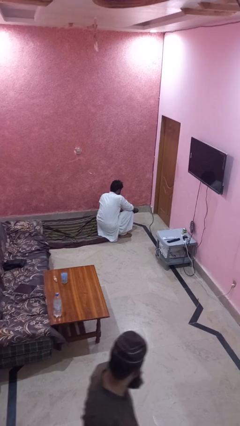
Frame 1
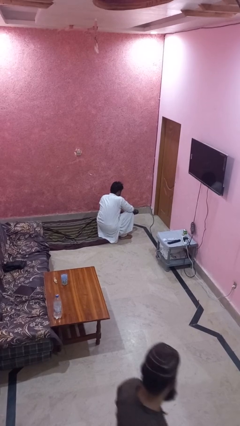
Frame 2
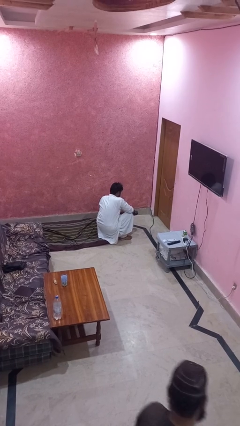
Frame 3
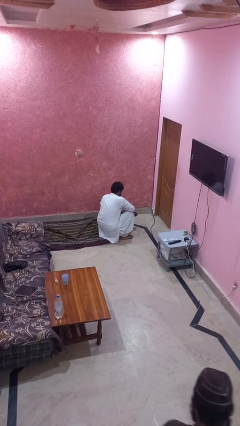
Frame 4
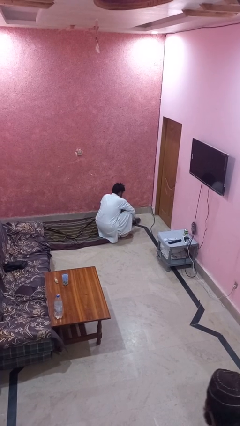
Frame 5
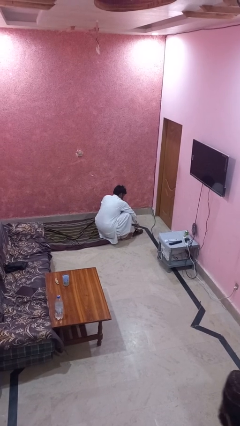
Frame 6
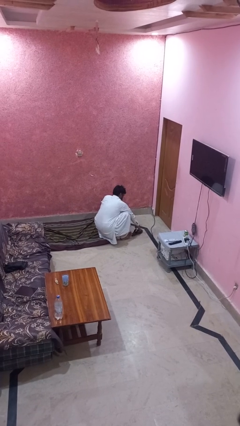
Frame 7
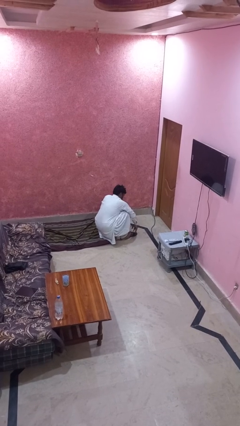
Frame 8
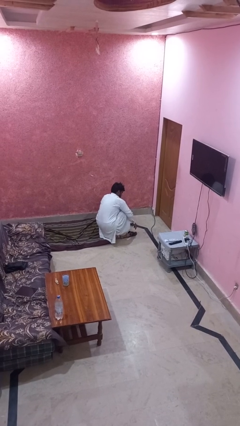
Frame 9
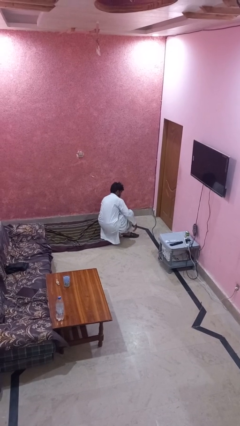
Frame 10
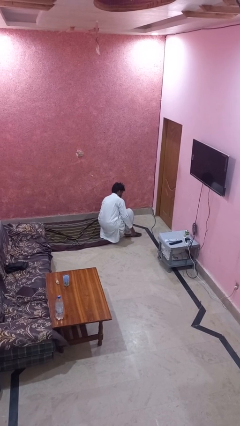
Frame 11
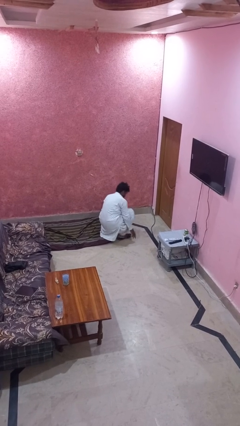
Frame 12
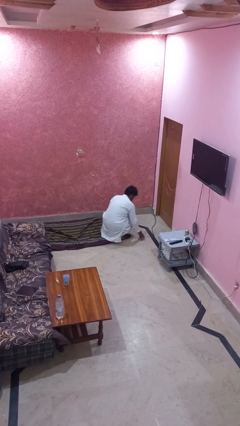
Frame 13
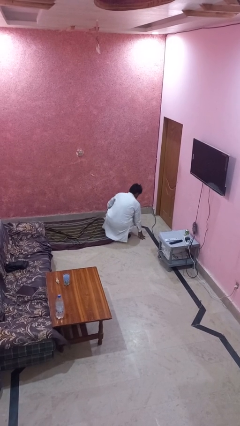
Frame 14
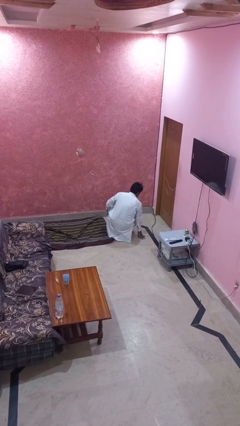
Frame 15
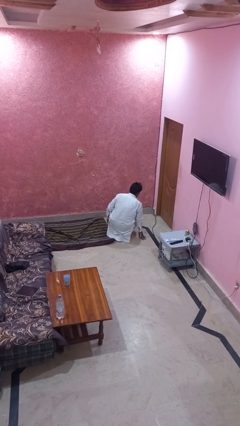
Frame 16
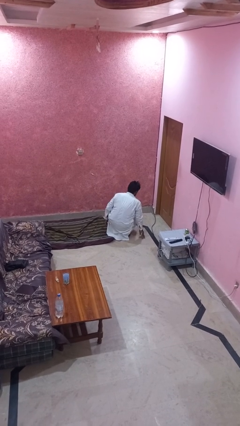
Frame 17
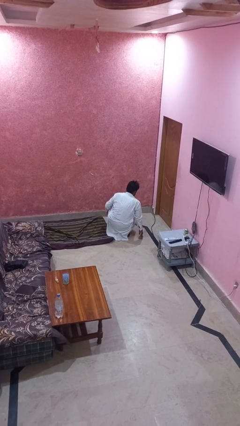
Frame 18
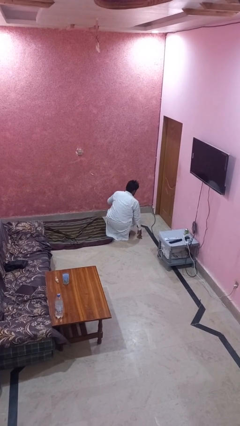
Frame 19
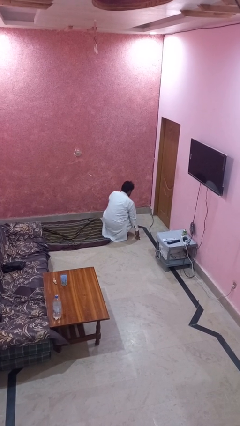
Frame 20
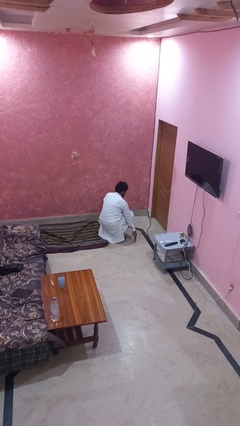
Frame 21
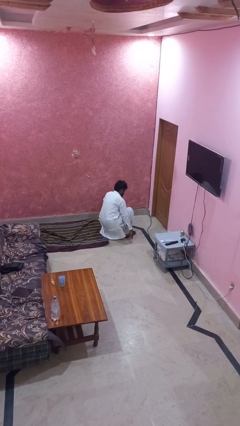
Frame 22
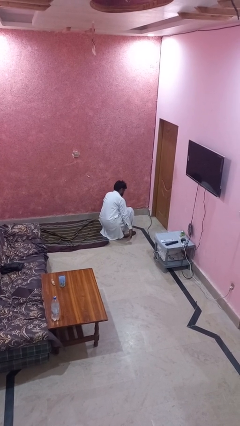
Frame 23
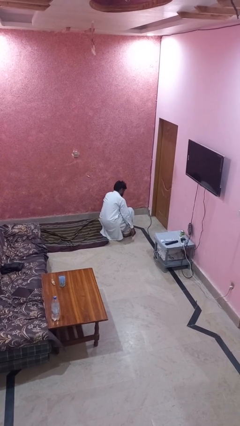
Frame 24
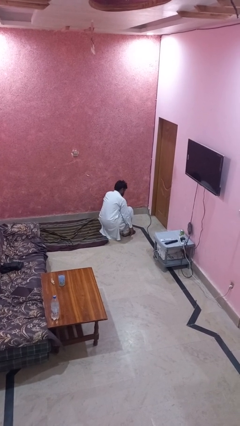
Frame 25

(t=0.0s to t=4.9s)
person puts on shoes

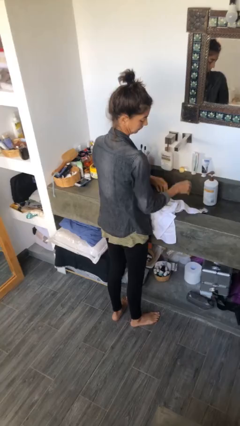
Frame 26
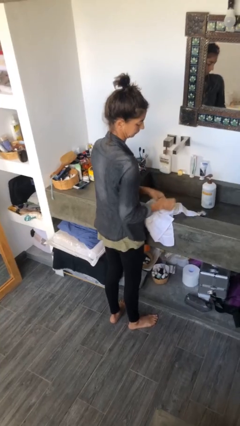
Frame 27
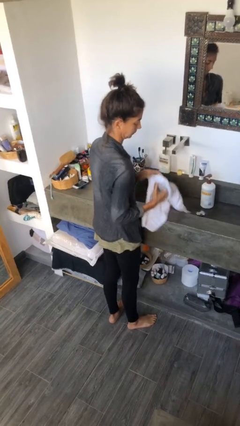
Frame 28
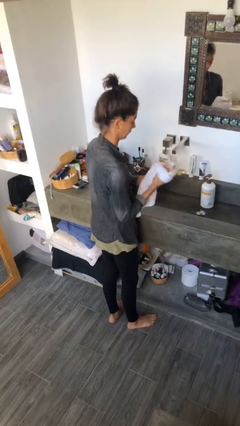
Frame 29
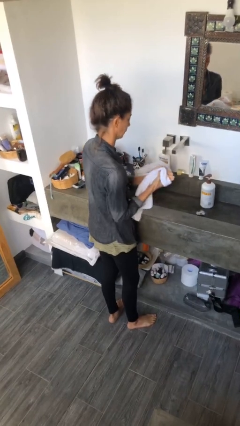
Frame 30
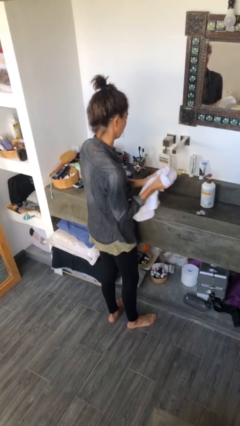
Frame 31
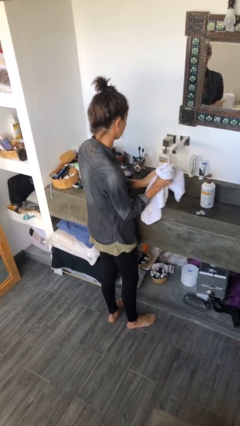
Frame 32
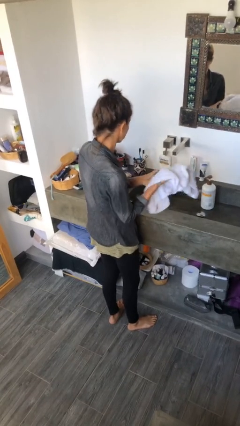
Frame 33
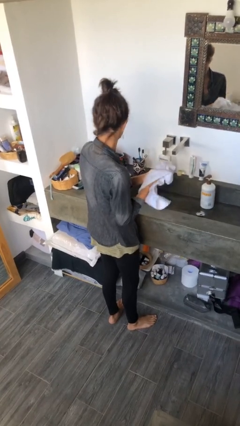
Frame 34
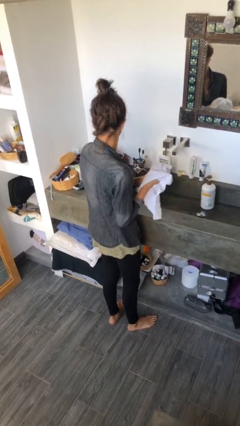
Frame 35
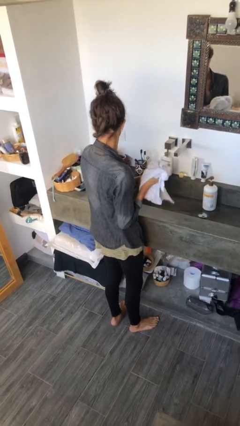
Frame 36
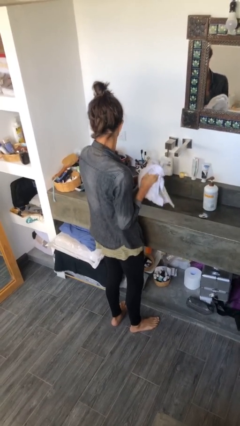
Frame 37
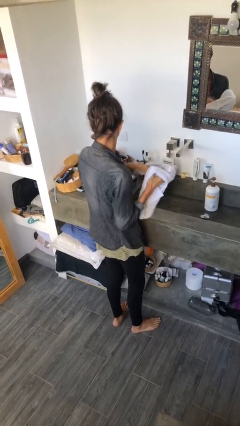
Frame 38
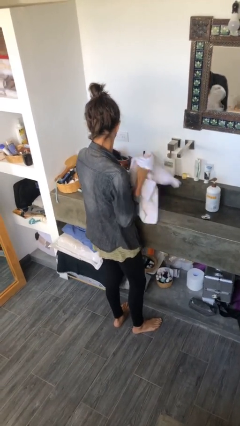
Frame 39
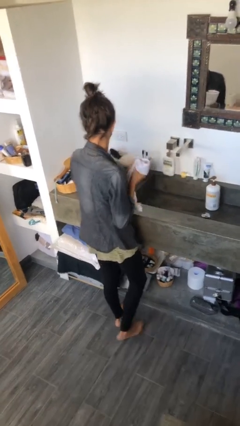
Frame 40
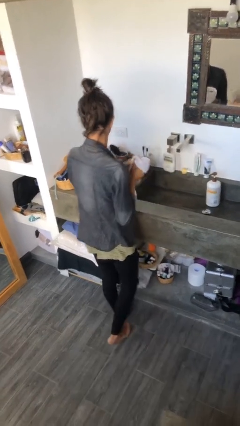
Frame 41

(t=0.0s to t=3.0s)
person dries hands with towel

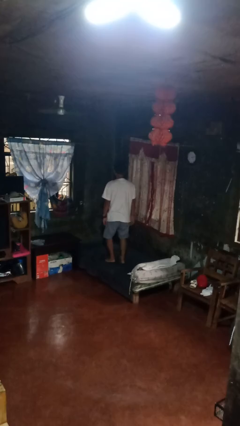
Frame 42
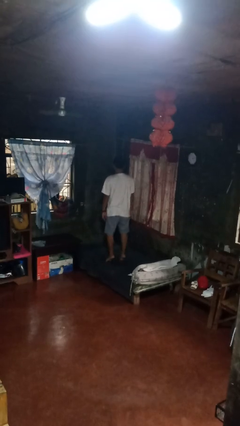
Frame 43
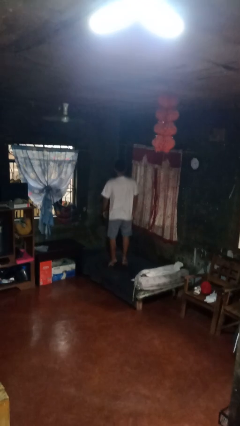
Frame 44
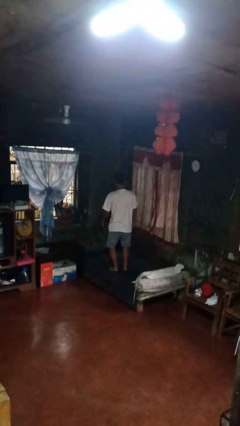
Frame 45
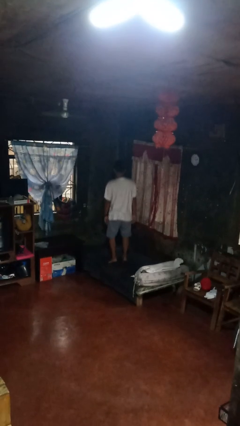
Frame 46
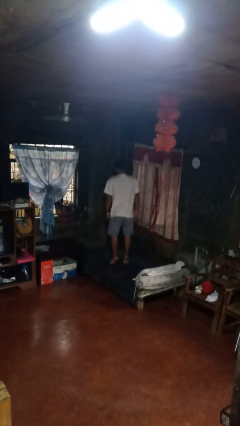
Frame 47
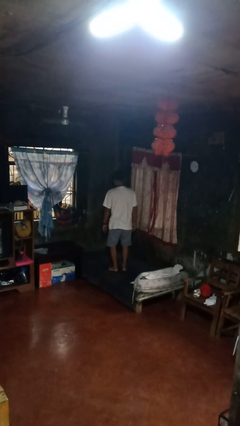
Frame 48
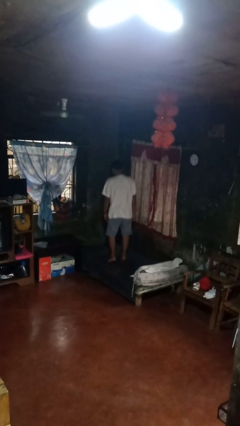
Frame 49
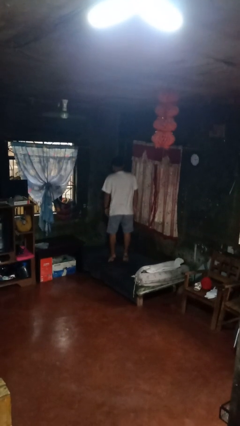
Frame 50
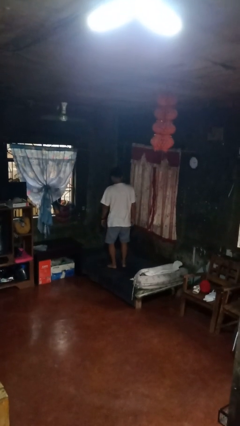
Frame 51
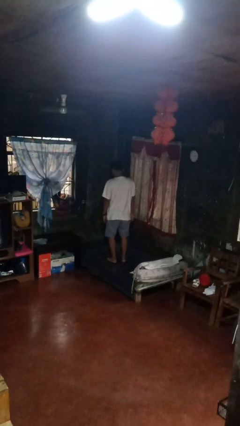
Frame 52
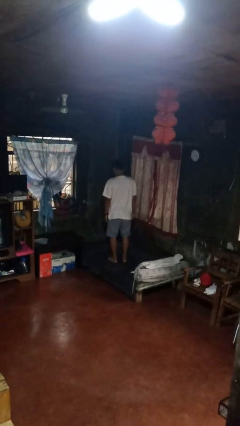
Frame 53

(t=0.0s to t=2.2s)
person jumps on bed

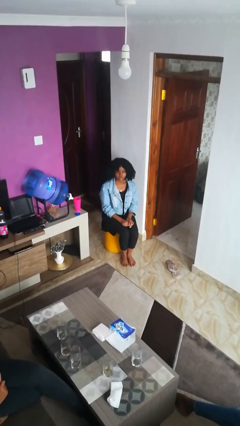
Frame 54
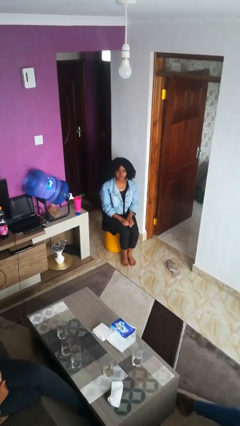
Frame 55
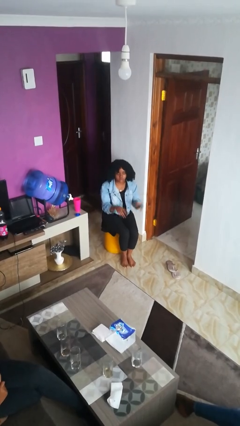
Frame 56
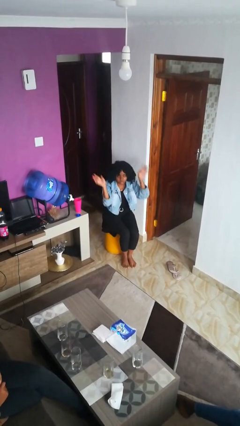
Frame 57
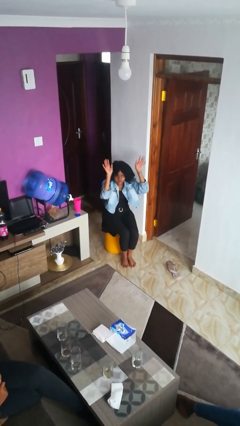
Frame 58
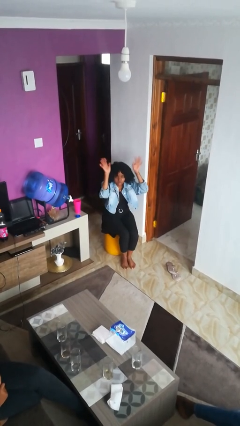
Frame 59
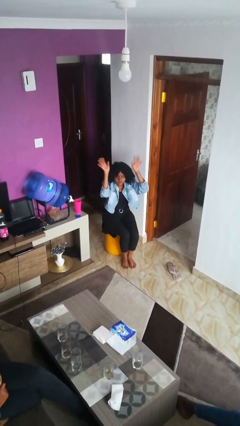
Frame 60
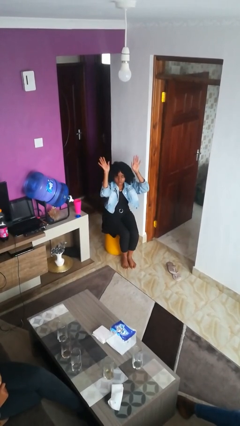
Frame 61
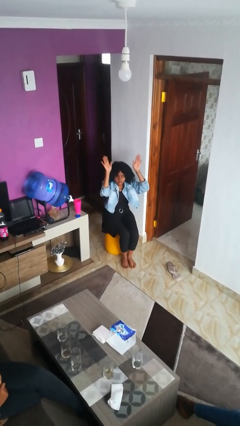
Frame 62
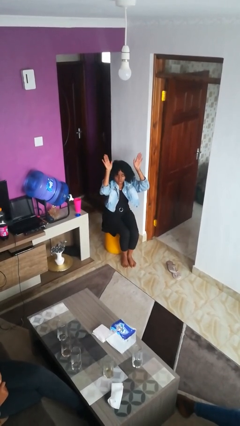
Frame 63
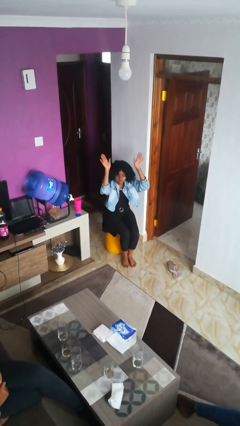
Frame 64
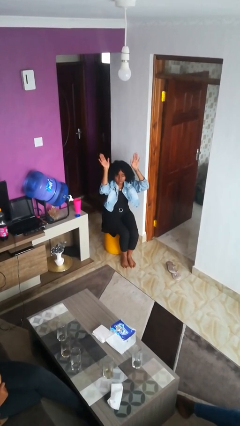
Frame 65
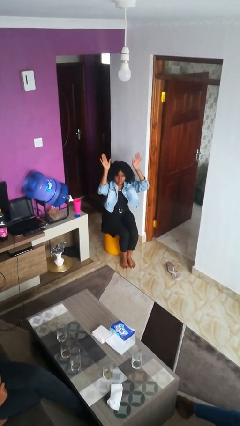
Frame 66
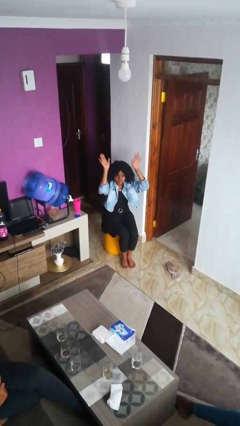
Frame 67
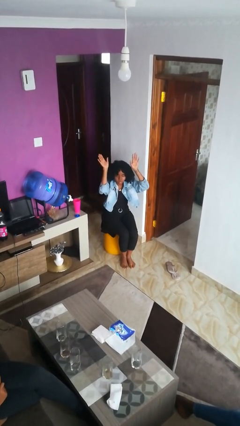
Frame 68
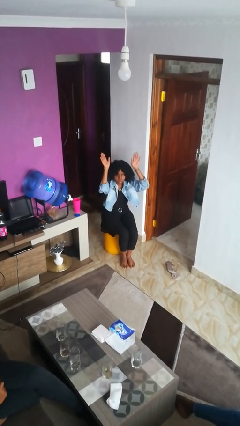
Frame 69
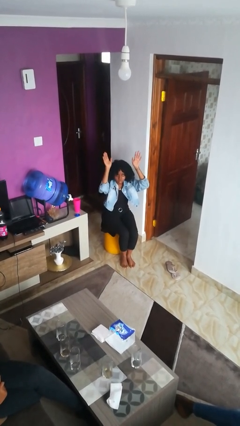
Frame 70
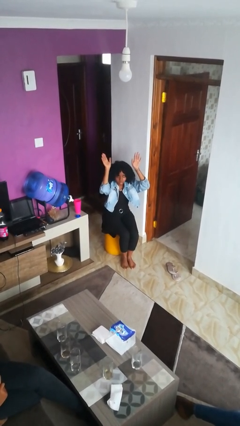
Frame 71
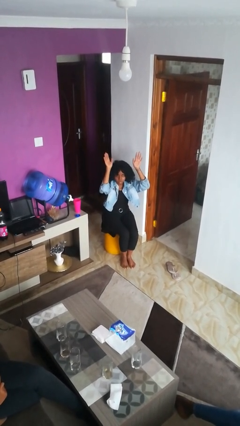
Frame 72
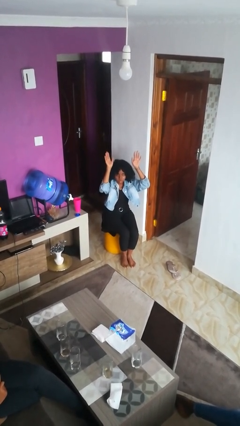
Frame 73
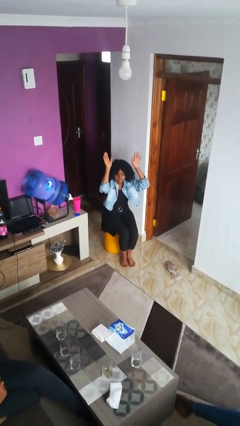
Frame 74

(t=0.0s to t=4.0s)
person gestures raise hand

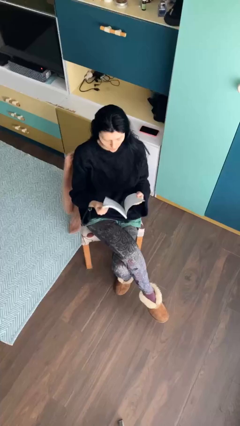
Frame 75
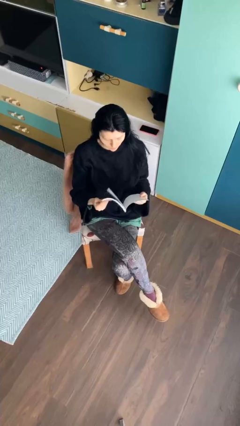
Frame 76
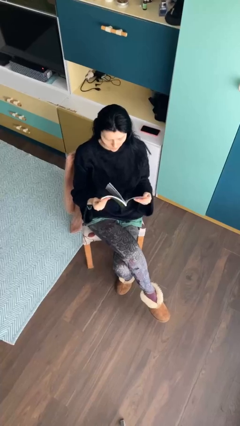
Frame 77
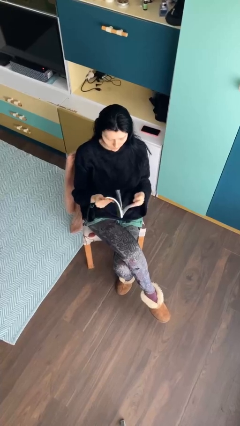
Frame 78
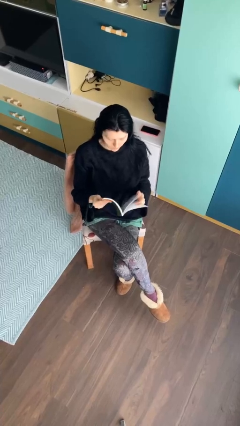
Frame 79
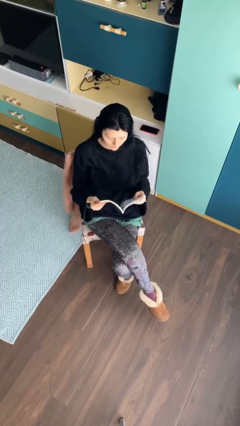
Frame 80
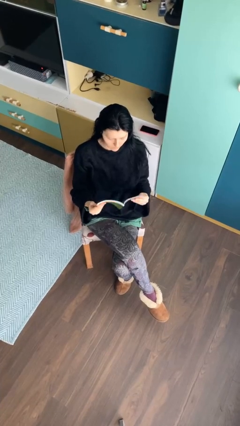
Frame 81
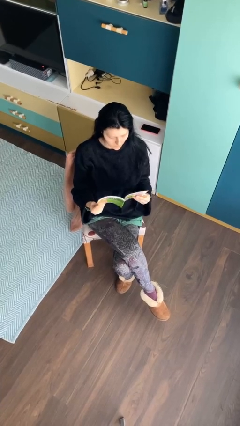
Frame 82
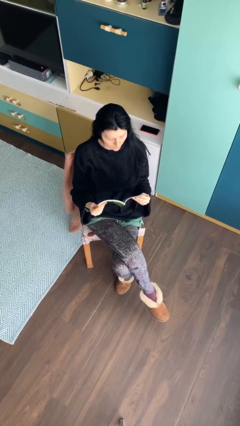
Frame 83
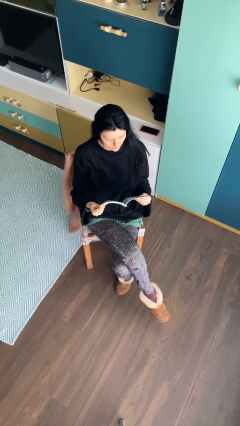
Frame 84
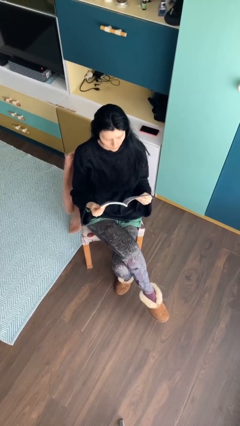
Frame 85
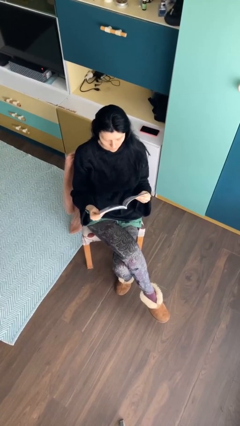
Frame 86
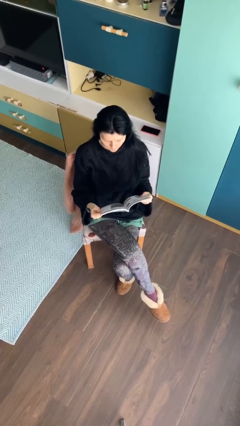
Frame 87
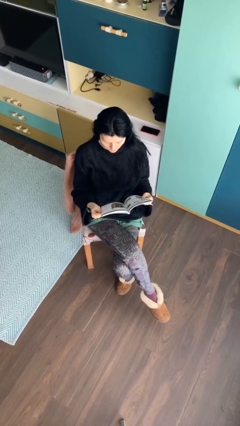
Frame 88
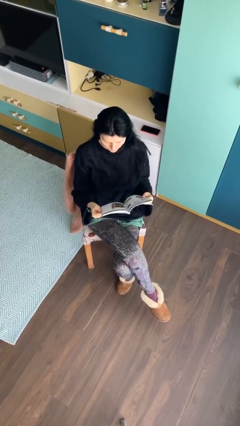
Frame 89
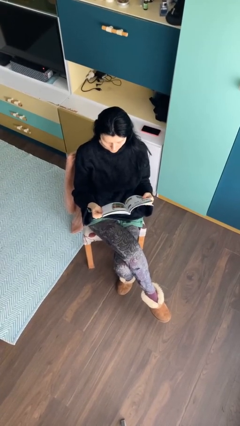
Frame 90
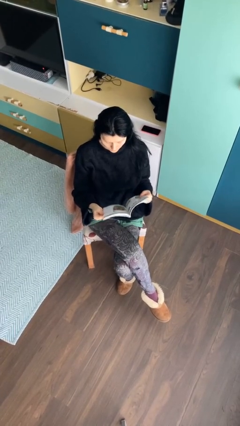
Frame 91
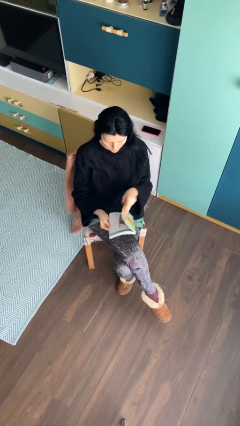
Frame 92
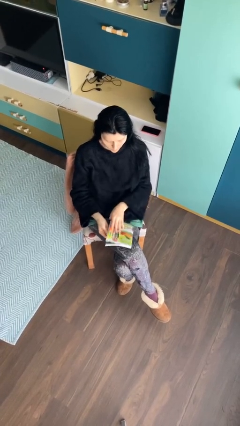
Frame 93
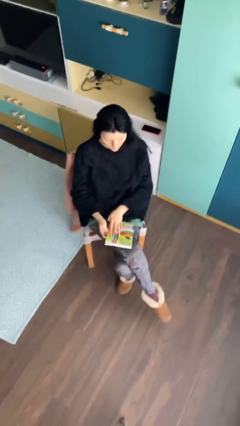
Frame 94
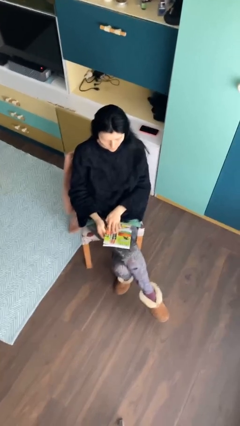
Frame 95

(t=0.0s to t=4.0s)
person reads document
